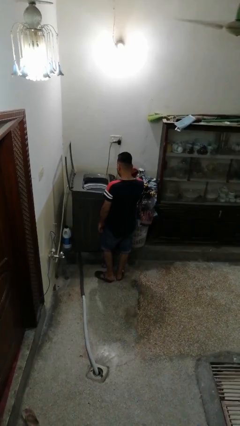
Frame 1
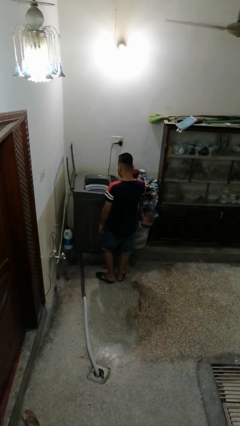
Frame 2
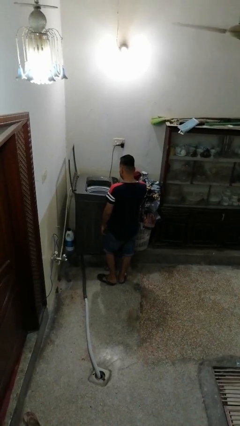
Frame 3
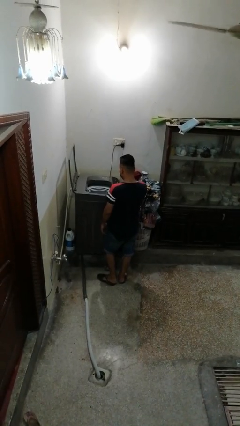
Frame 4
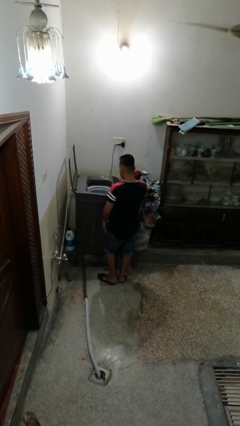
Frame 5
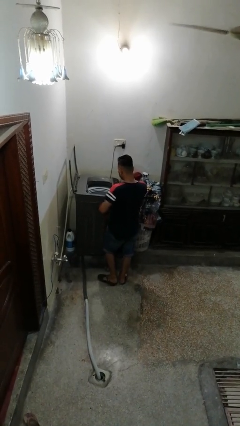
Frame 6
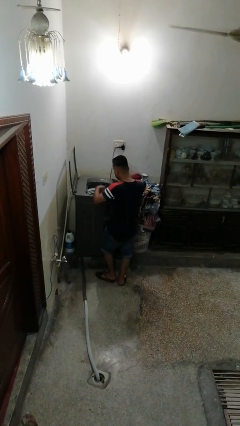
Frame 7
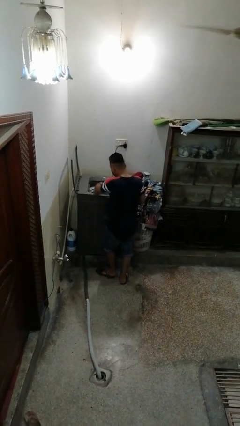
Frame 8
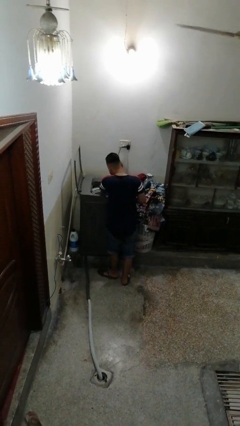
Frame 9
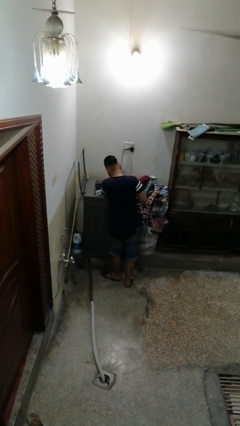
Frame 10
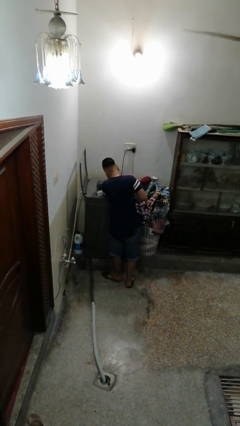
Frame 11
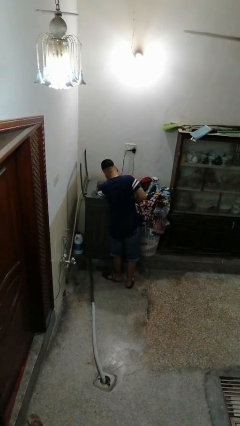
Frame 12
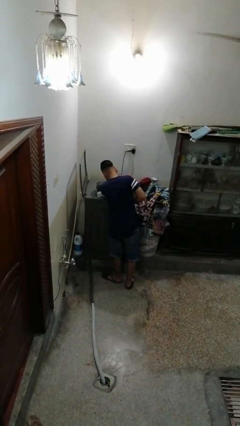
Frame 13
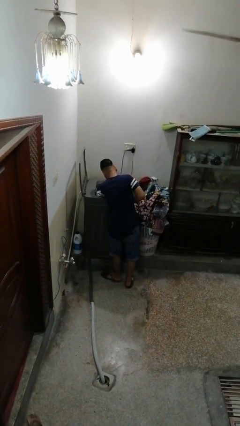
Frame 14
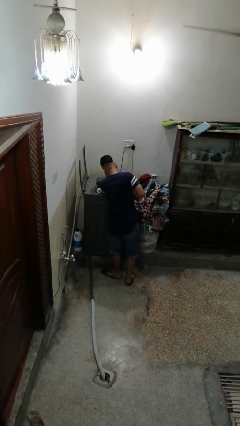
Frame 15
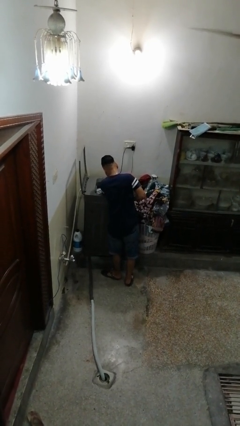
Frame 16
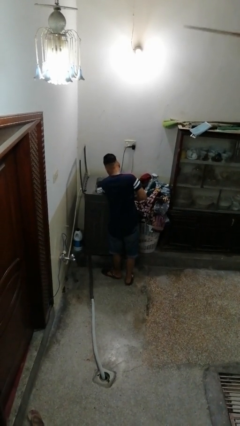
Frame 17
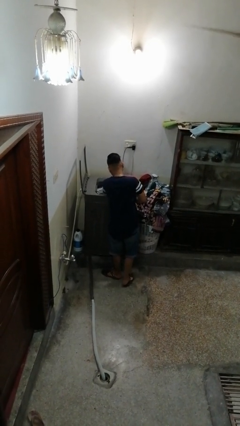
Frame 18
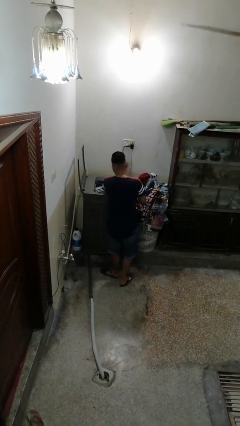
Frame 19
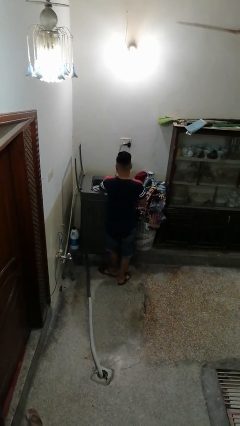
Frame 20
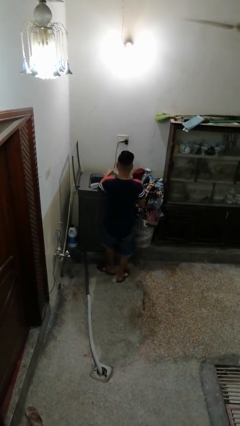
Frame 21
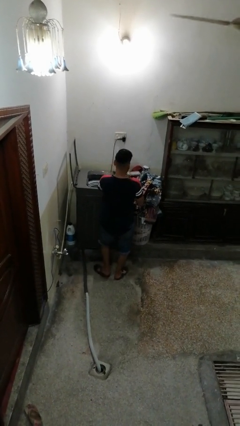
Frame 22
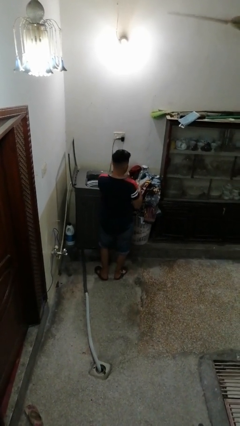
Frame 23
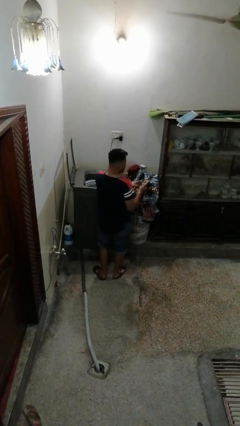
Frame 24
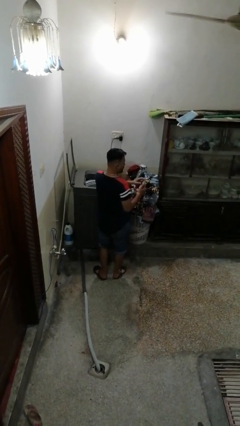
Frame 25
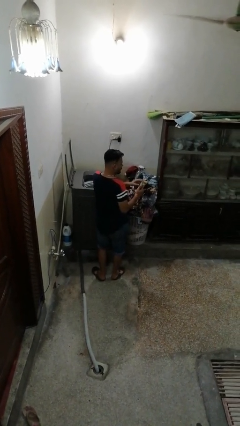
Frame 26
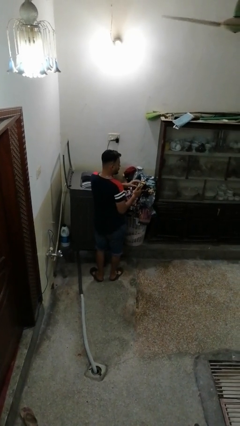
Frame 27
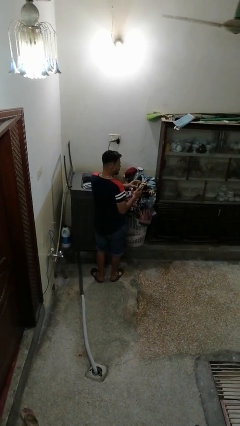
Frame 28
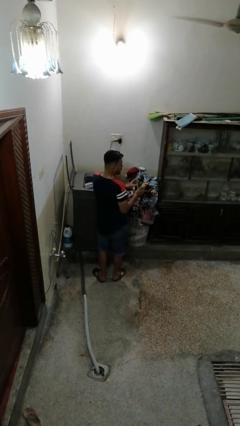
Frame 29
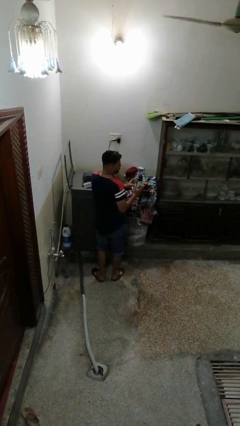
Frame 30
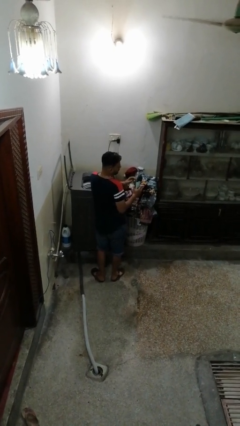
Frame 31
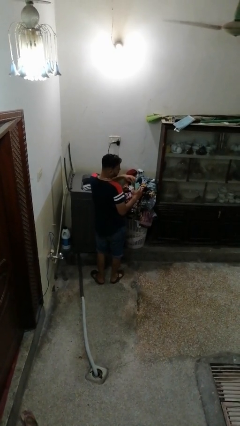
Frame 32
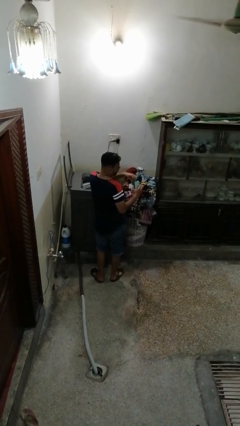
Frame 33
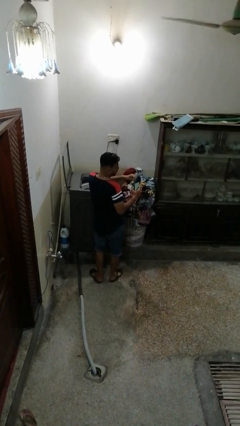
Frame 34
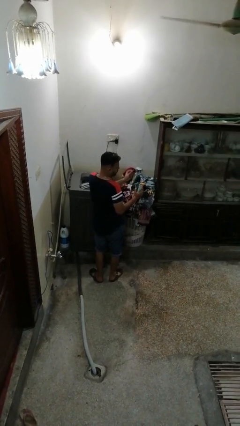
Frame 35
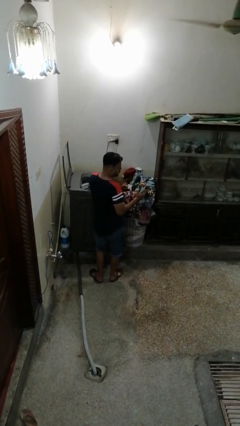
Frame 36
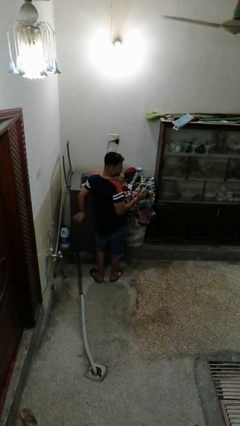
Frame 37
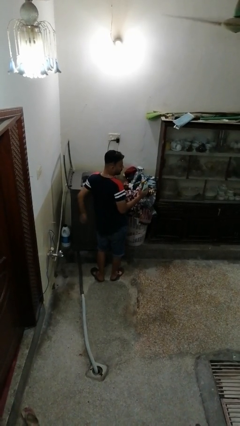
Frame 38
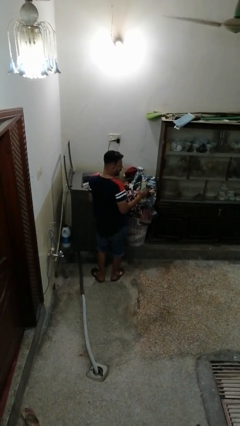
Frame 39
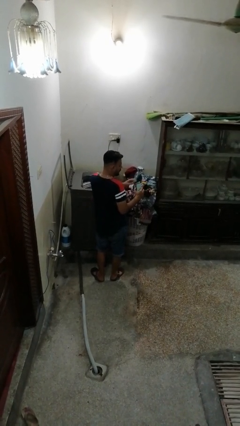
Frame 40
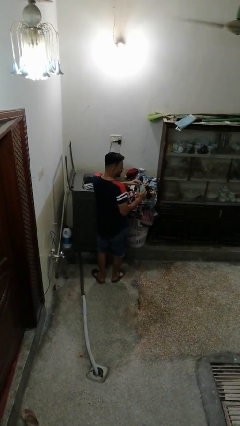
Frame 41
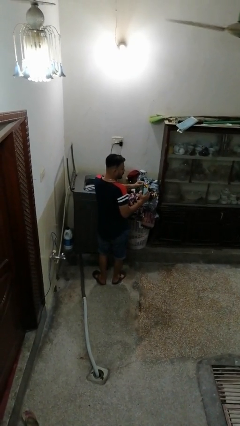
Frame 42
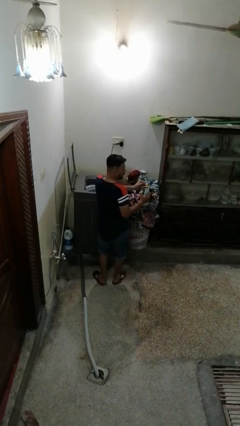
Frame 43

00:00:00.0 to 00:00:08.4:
person cleans dryer lint trap

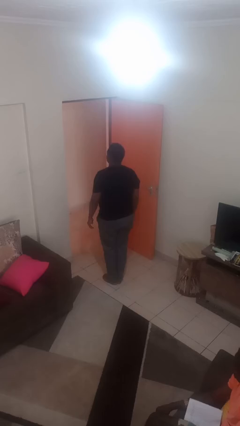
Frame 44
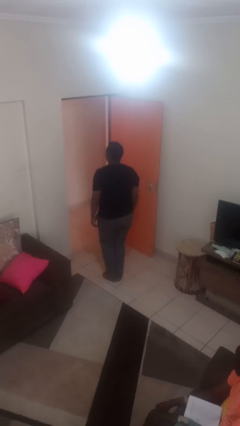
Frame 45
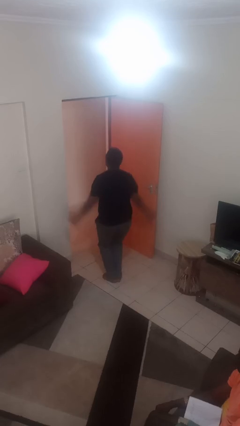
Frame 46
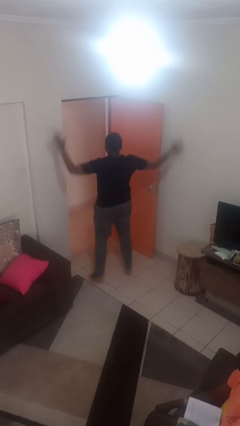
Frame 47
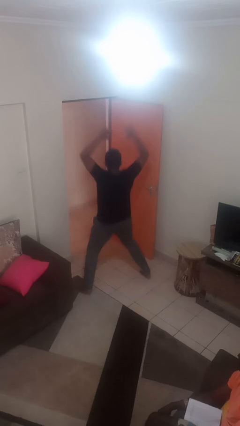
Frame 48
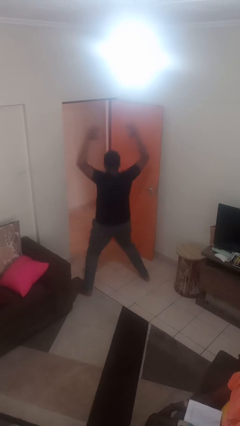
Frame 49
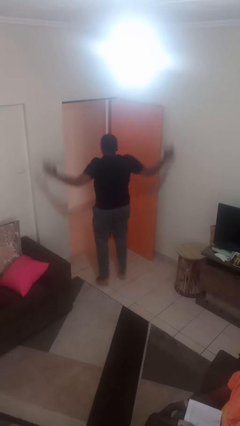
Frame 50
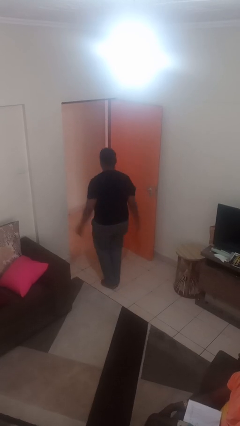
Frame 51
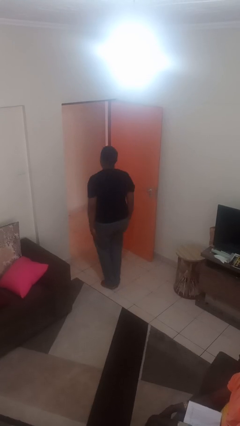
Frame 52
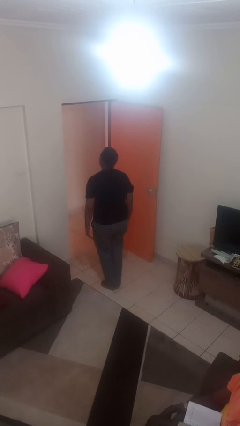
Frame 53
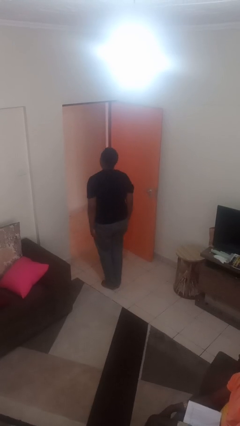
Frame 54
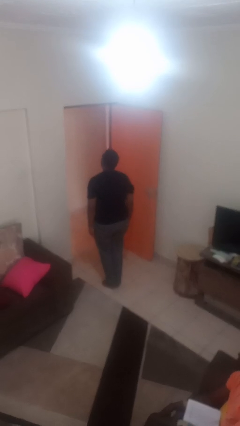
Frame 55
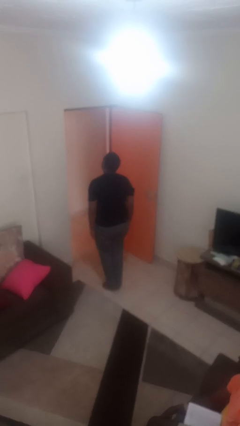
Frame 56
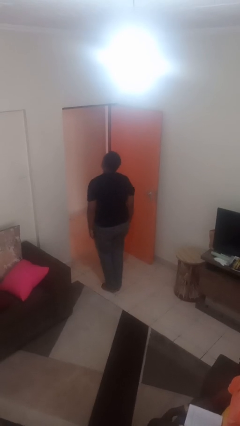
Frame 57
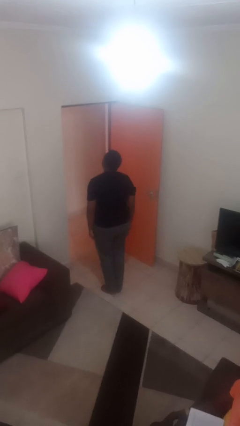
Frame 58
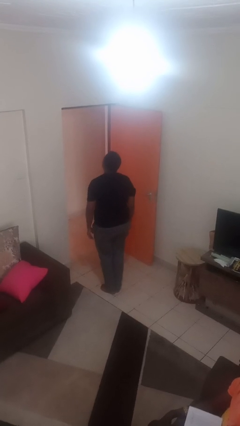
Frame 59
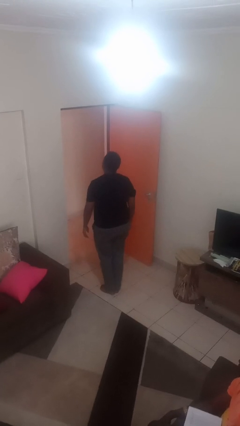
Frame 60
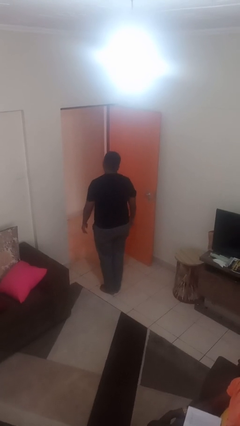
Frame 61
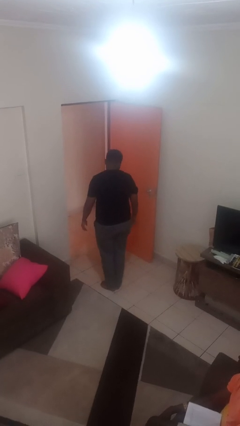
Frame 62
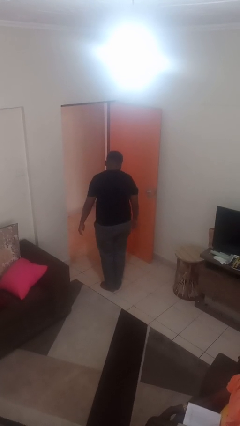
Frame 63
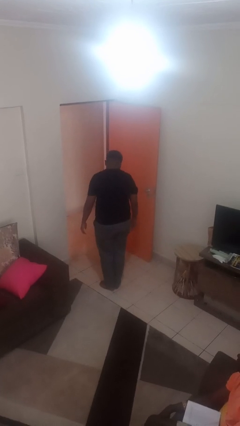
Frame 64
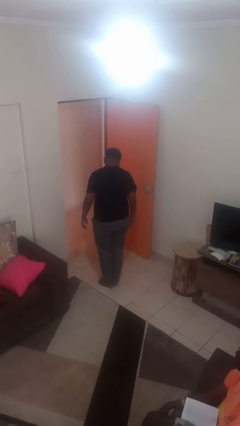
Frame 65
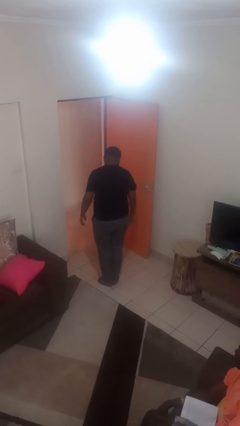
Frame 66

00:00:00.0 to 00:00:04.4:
person exercises with jumping jacks

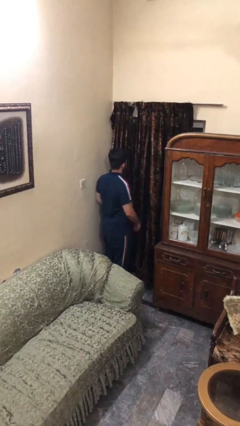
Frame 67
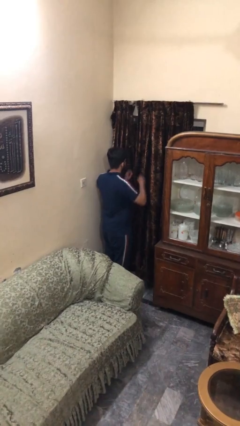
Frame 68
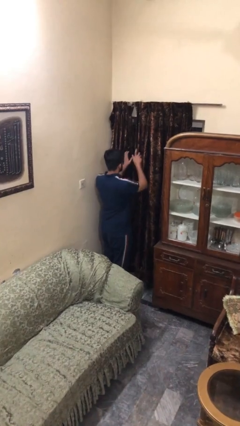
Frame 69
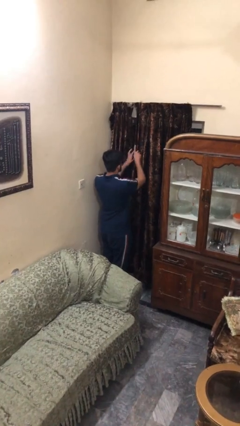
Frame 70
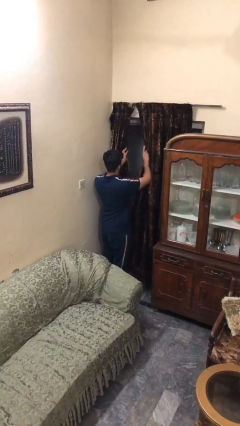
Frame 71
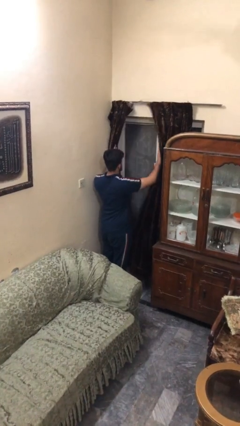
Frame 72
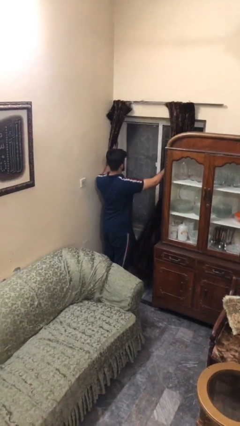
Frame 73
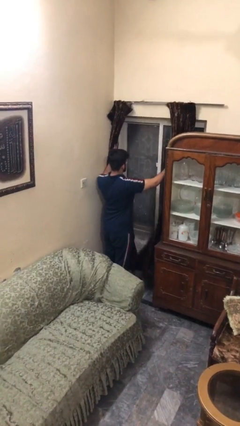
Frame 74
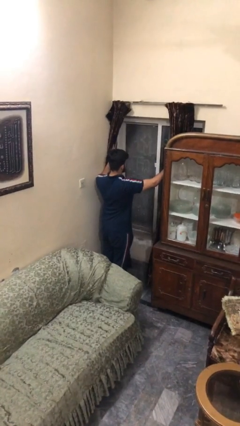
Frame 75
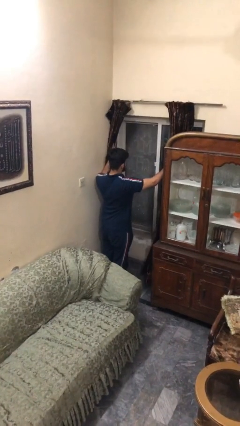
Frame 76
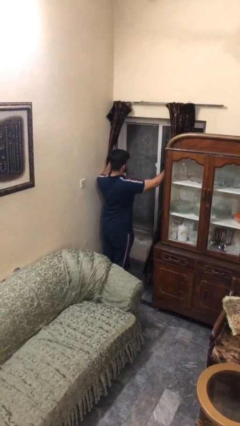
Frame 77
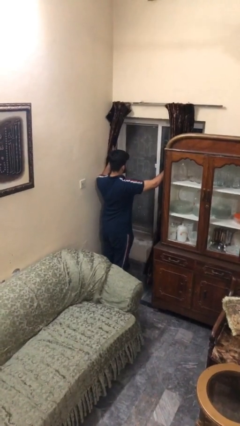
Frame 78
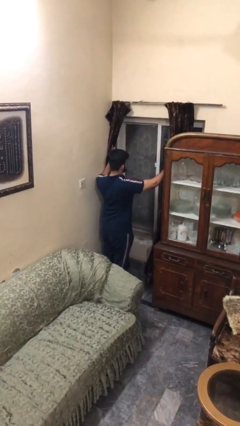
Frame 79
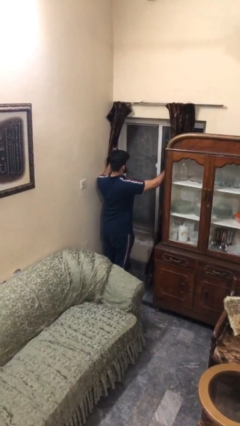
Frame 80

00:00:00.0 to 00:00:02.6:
person opens curtains

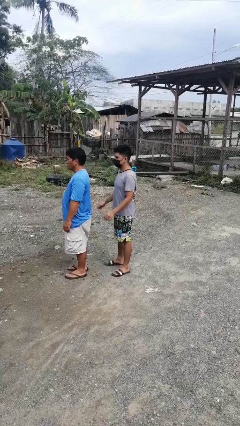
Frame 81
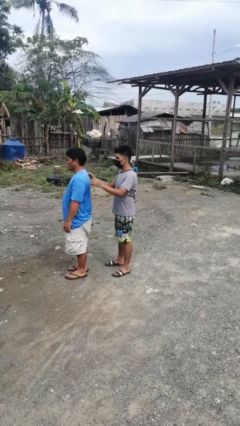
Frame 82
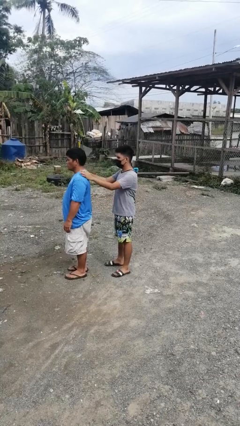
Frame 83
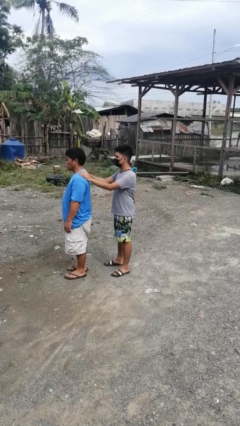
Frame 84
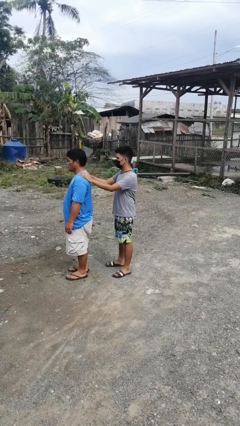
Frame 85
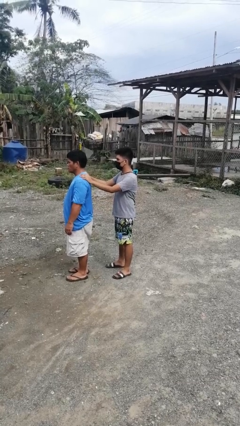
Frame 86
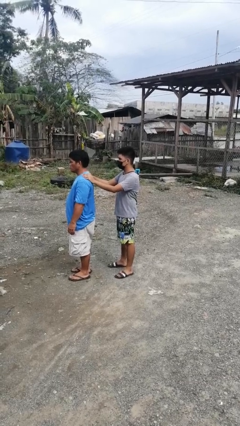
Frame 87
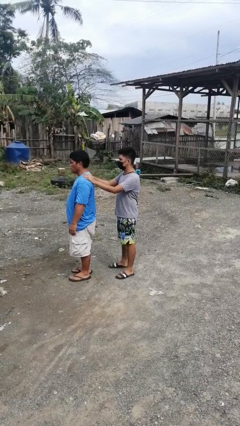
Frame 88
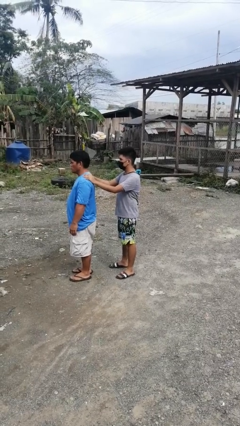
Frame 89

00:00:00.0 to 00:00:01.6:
person grabs person by shoulder

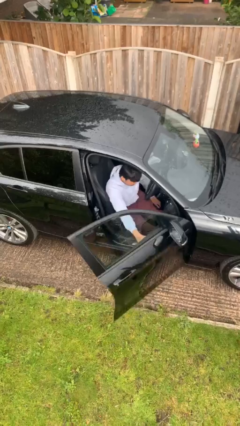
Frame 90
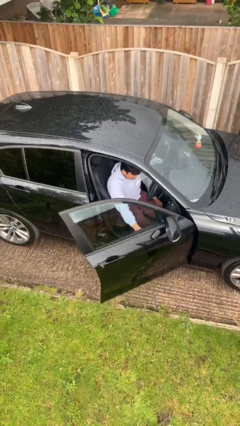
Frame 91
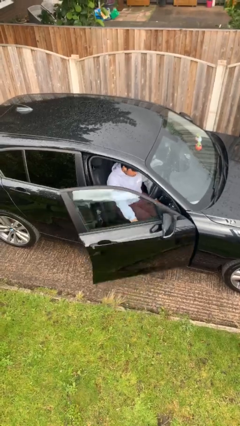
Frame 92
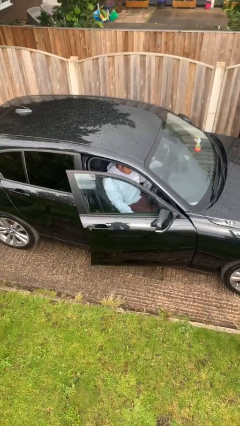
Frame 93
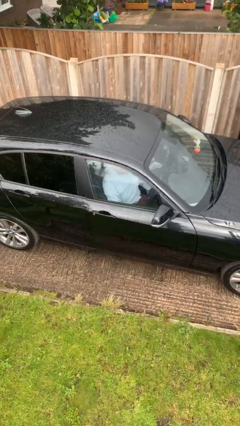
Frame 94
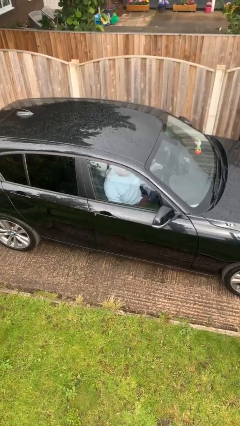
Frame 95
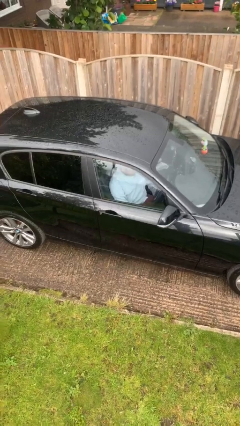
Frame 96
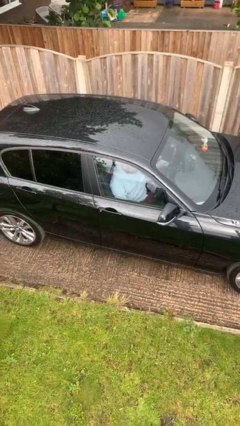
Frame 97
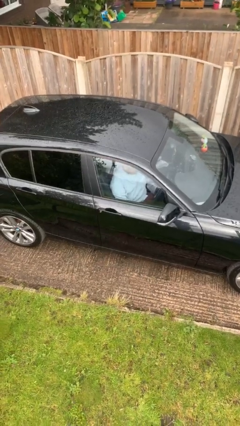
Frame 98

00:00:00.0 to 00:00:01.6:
person closes car door
